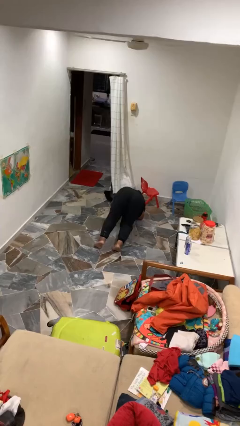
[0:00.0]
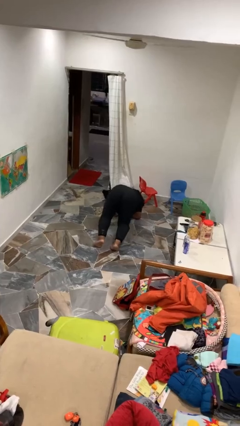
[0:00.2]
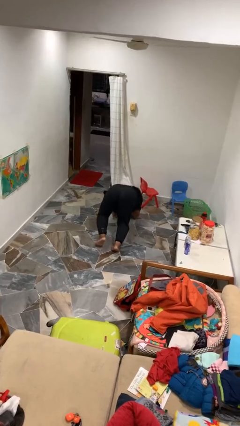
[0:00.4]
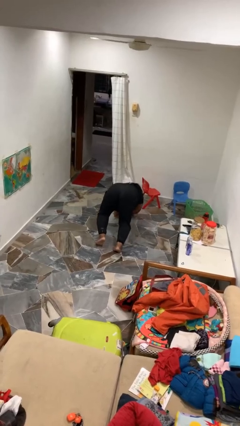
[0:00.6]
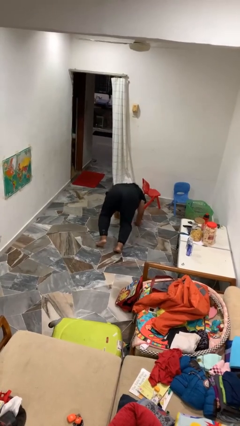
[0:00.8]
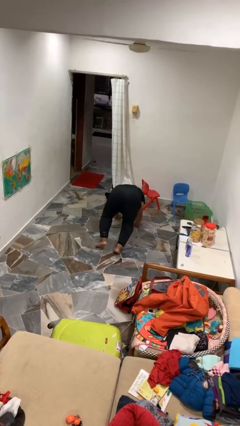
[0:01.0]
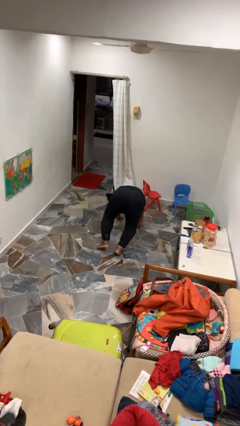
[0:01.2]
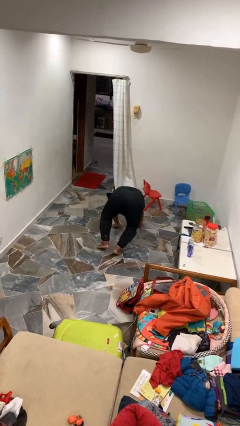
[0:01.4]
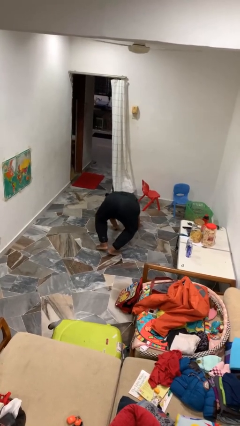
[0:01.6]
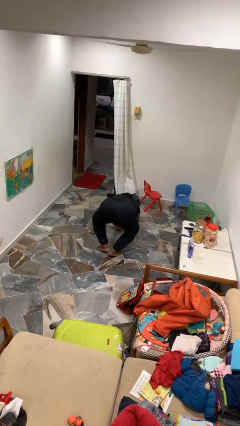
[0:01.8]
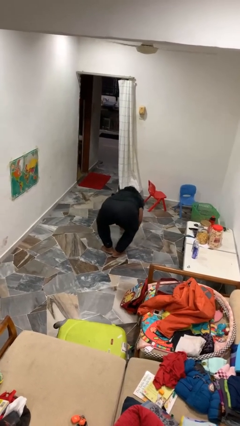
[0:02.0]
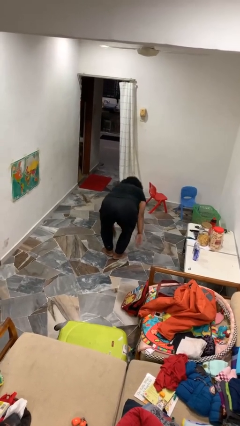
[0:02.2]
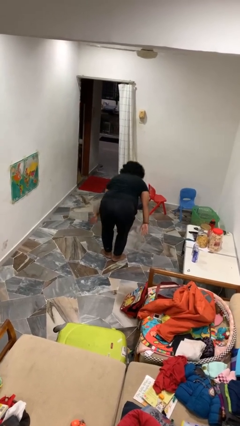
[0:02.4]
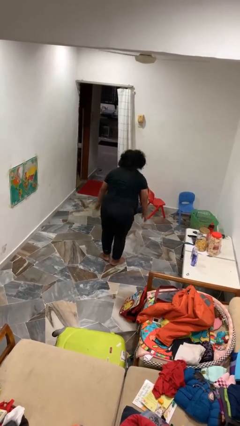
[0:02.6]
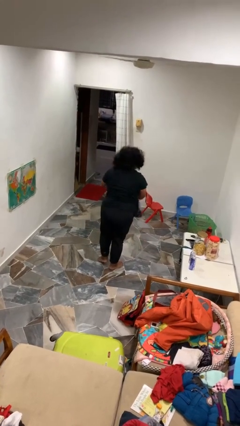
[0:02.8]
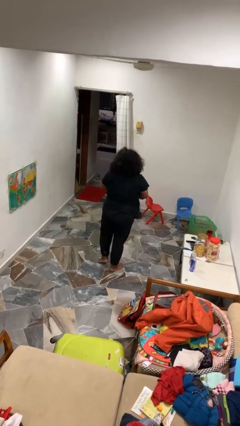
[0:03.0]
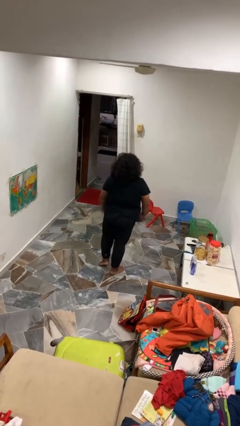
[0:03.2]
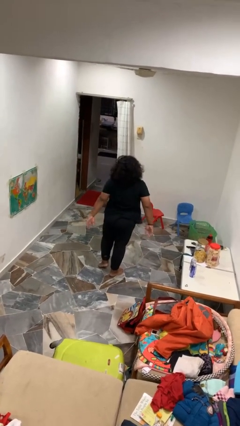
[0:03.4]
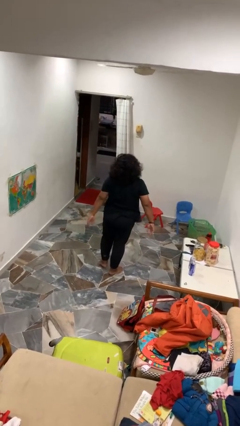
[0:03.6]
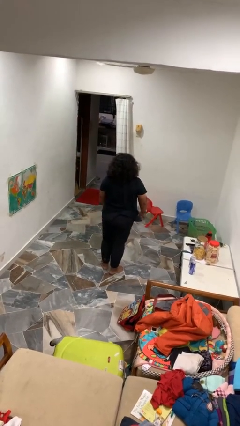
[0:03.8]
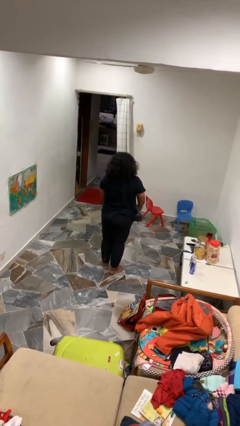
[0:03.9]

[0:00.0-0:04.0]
person stands up from floor

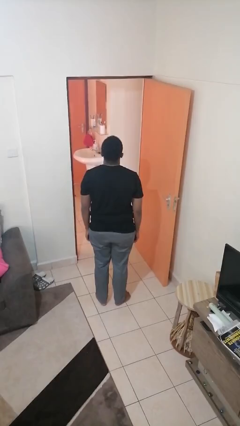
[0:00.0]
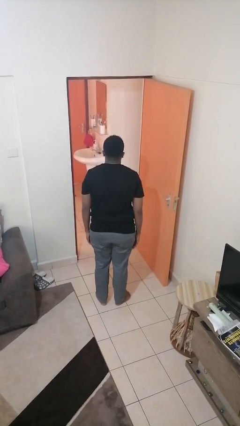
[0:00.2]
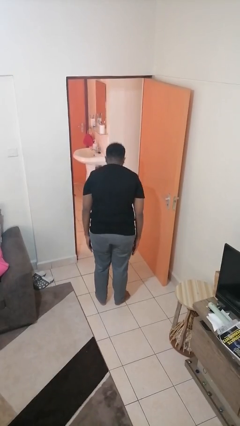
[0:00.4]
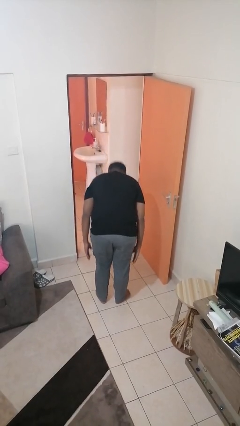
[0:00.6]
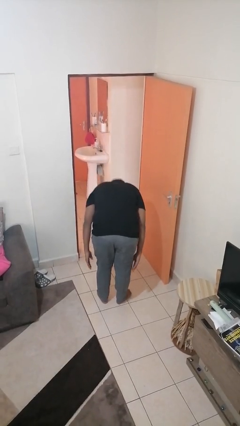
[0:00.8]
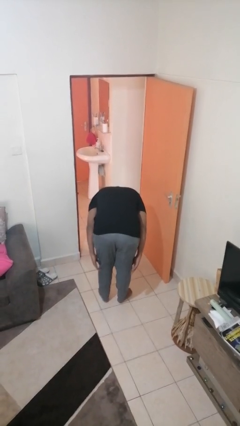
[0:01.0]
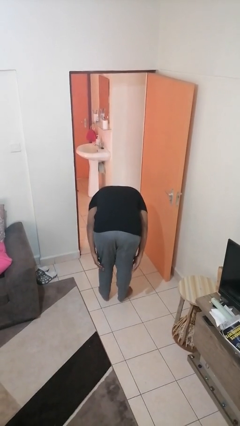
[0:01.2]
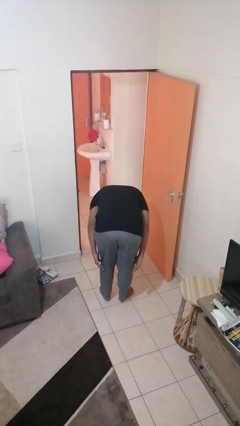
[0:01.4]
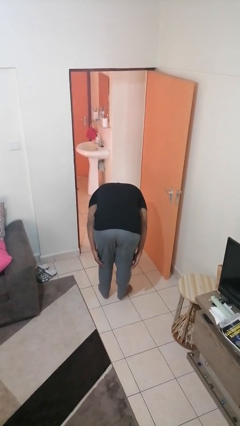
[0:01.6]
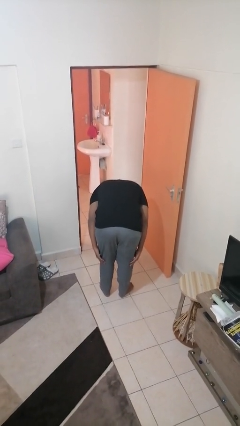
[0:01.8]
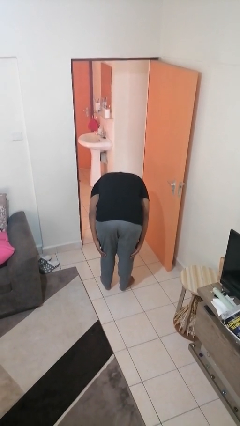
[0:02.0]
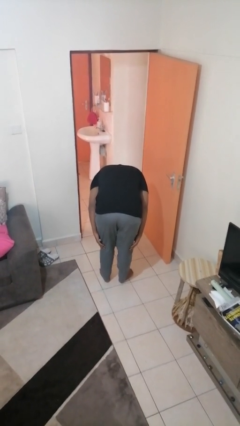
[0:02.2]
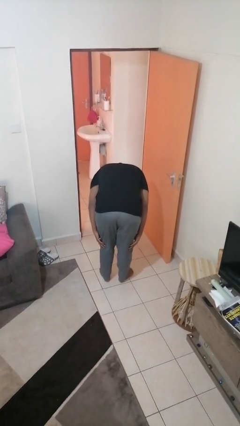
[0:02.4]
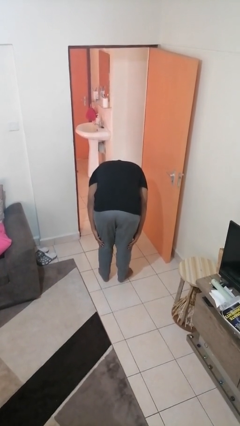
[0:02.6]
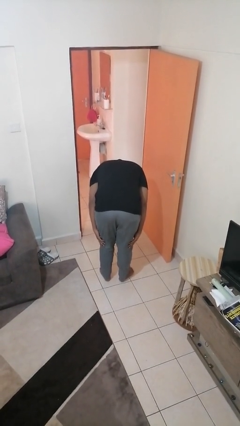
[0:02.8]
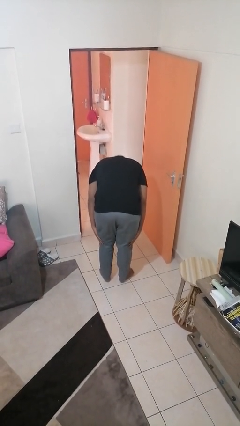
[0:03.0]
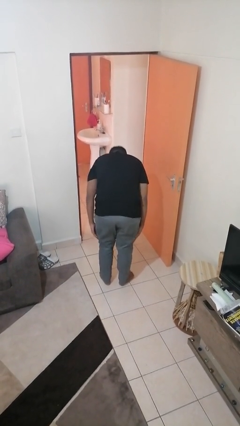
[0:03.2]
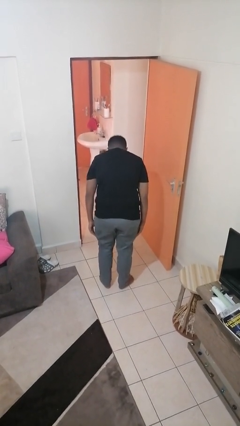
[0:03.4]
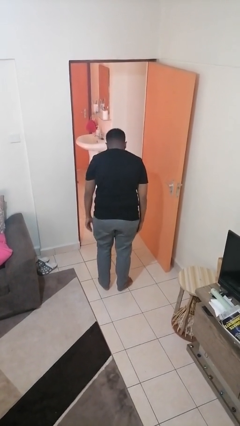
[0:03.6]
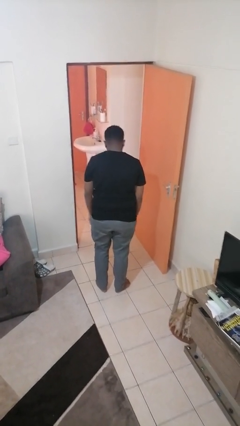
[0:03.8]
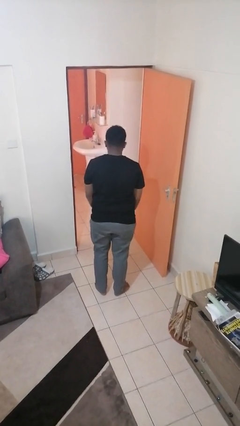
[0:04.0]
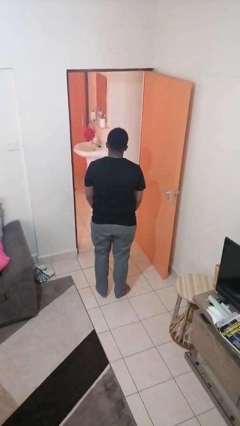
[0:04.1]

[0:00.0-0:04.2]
person bows

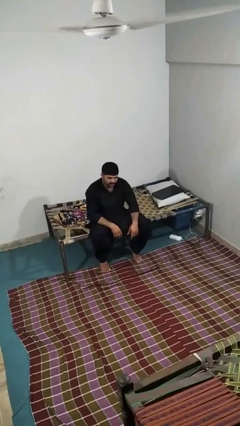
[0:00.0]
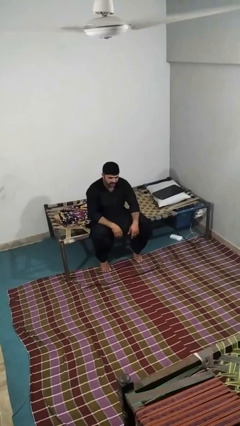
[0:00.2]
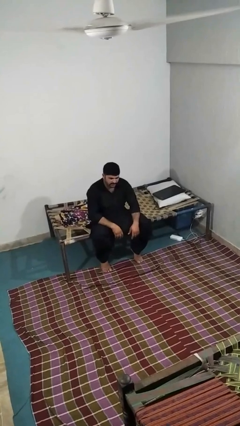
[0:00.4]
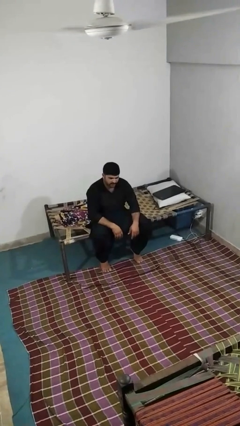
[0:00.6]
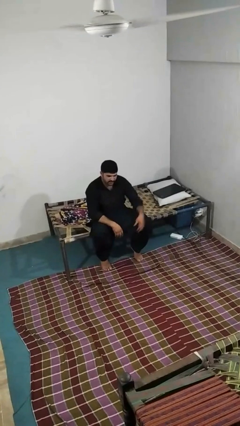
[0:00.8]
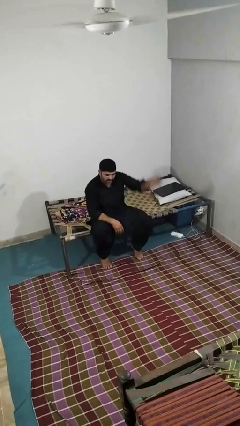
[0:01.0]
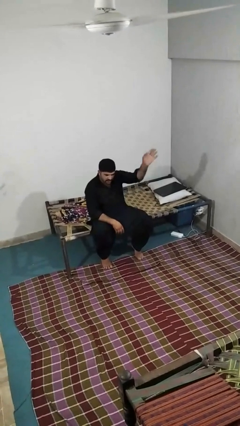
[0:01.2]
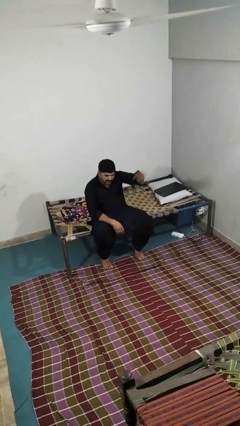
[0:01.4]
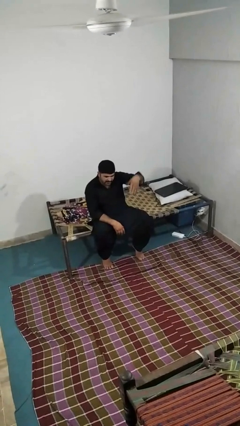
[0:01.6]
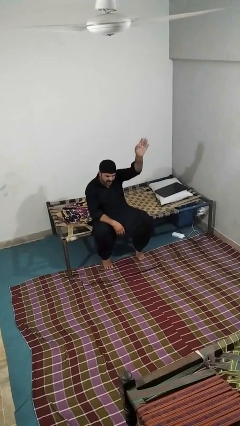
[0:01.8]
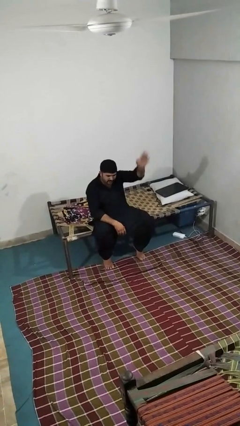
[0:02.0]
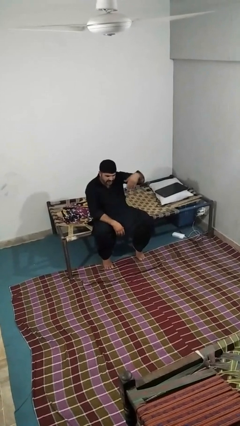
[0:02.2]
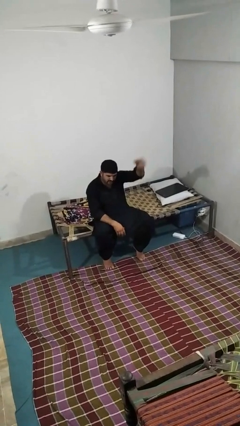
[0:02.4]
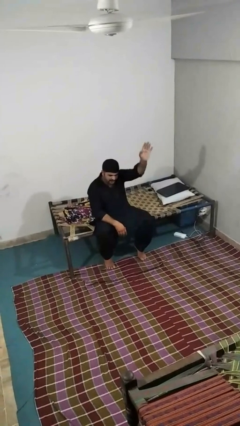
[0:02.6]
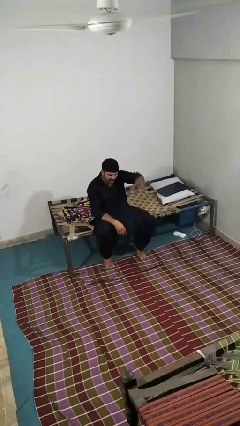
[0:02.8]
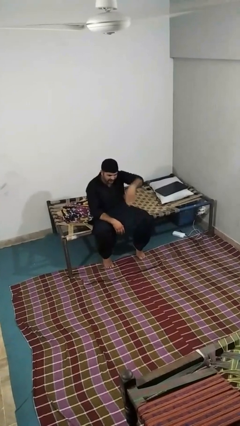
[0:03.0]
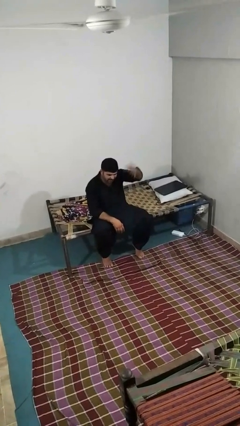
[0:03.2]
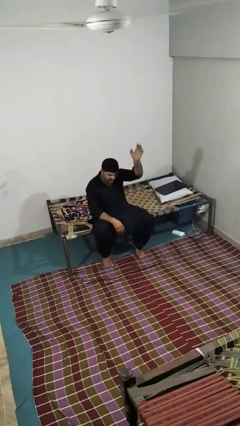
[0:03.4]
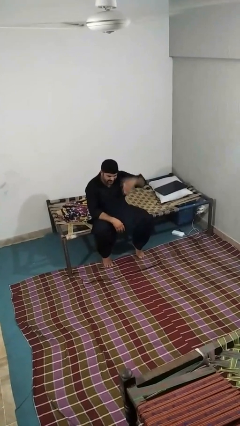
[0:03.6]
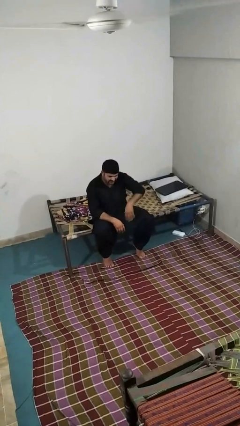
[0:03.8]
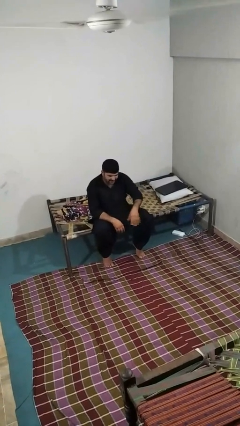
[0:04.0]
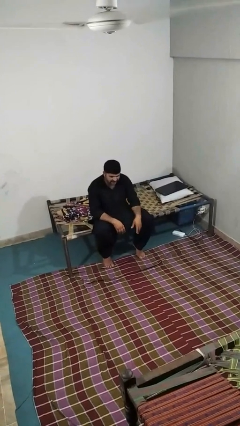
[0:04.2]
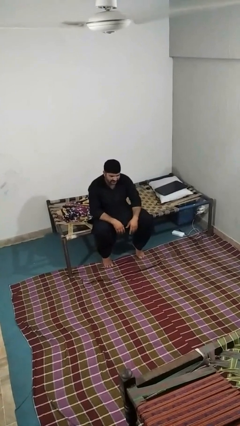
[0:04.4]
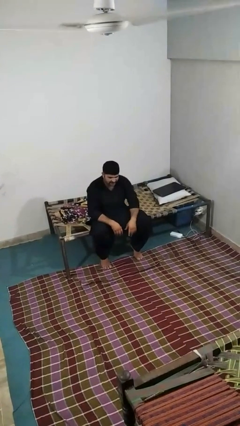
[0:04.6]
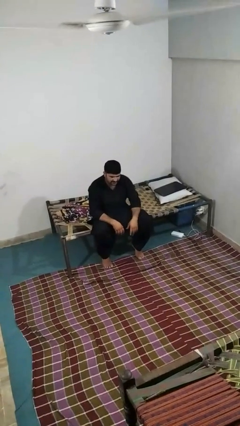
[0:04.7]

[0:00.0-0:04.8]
person gestures come here

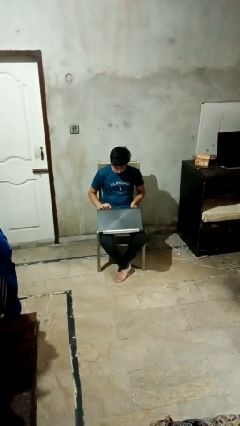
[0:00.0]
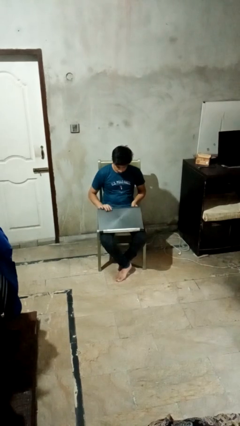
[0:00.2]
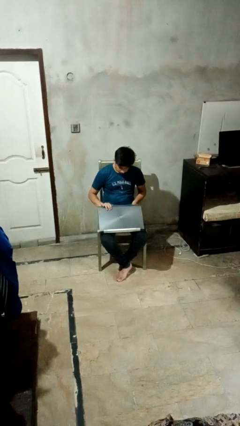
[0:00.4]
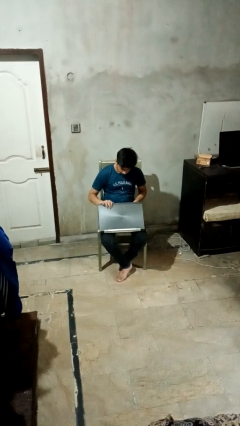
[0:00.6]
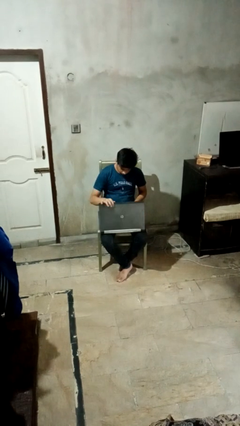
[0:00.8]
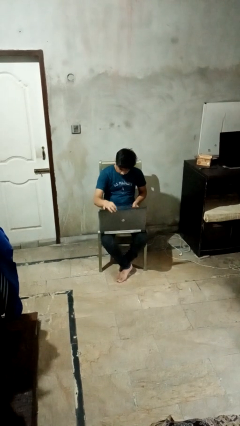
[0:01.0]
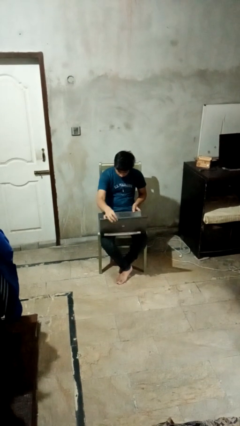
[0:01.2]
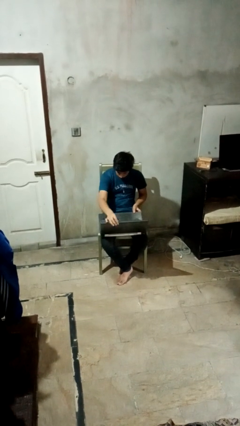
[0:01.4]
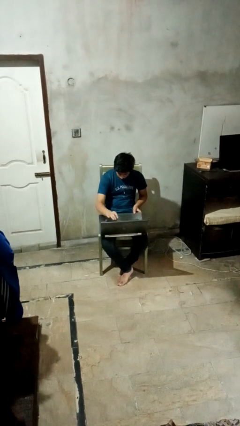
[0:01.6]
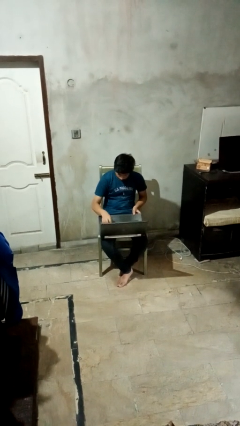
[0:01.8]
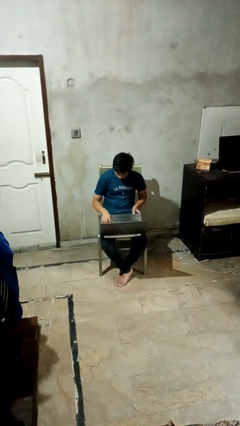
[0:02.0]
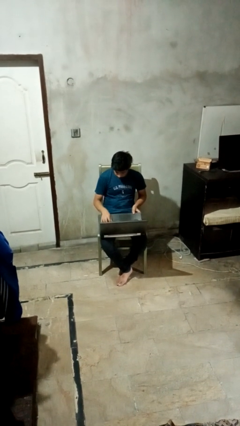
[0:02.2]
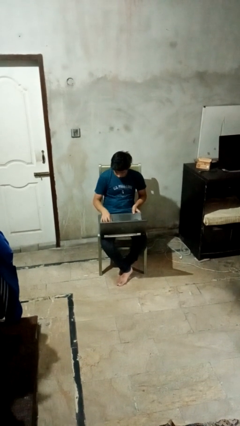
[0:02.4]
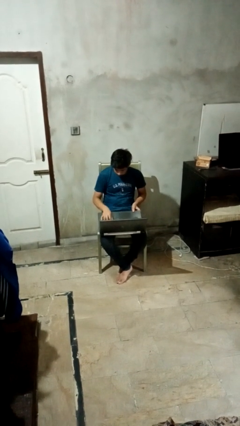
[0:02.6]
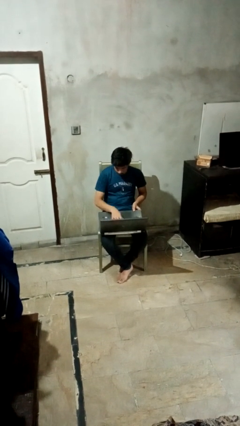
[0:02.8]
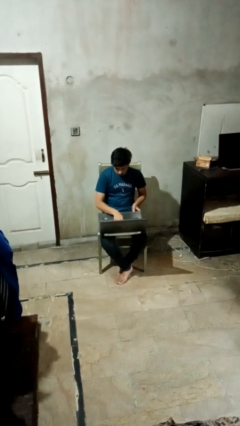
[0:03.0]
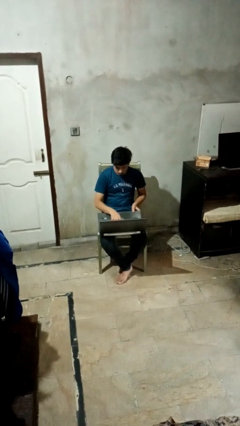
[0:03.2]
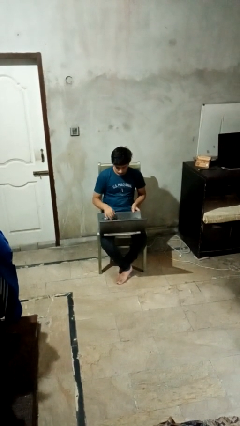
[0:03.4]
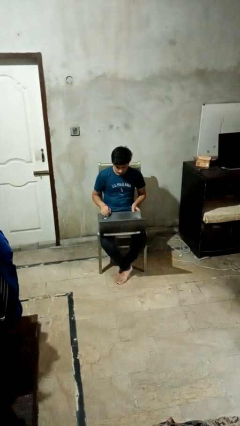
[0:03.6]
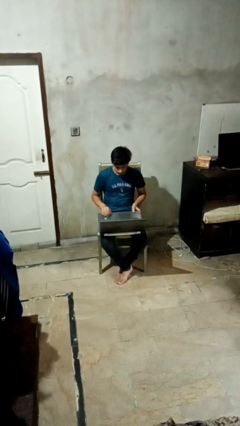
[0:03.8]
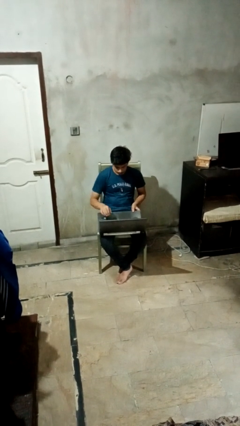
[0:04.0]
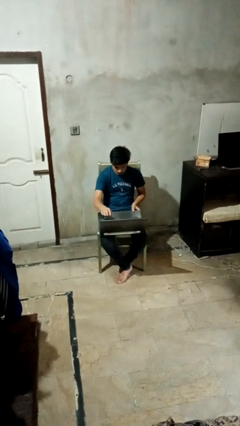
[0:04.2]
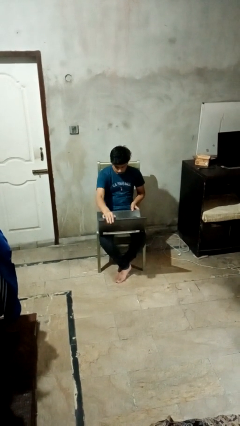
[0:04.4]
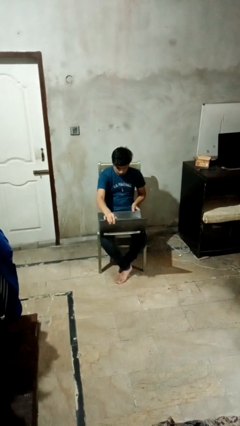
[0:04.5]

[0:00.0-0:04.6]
person opens laptop
